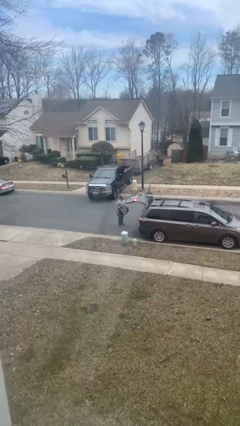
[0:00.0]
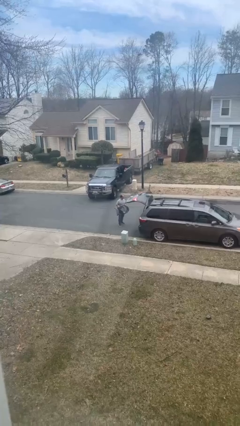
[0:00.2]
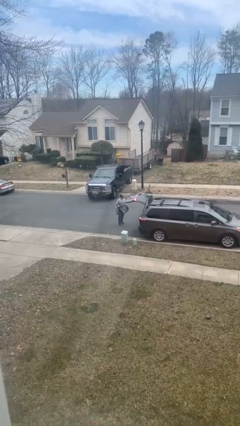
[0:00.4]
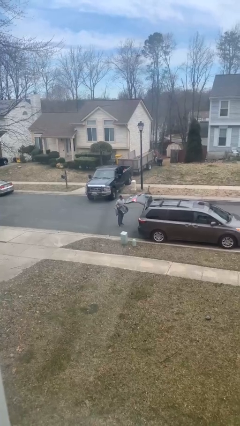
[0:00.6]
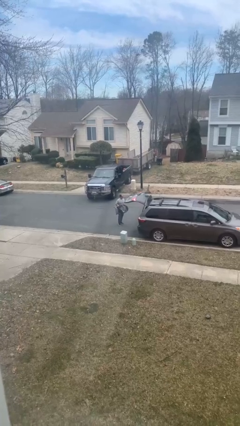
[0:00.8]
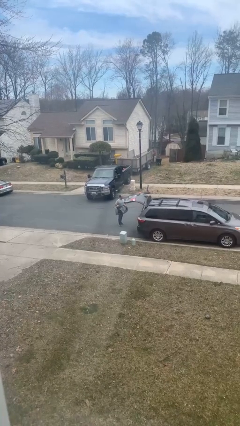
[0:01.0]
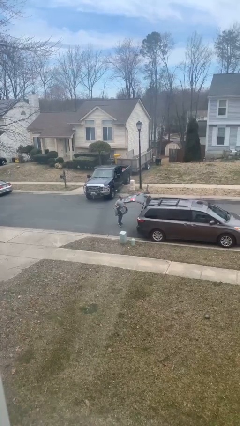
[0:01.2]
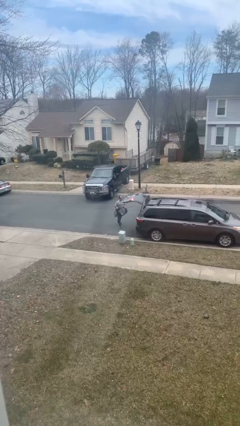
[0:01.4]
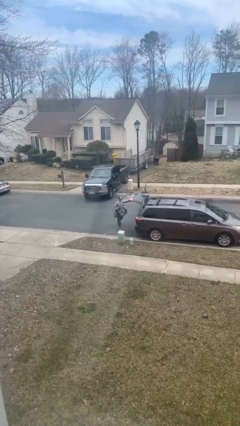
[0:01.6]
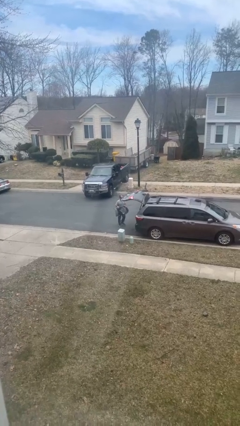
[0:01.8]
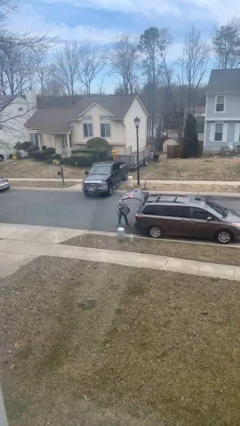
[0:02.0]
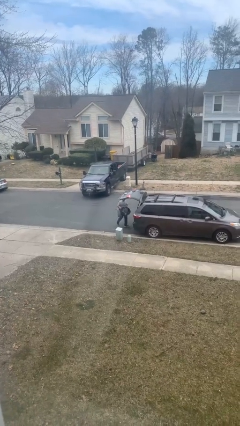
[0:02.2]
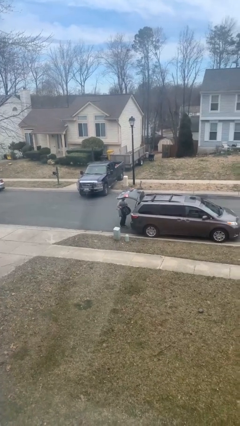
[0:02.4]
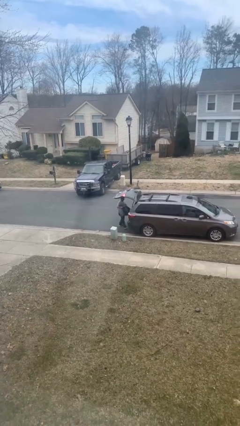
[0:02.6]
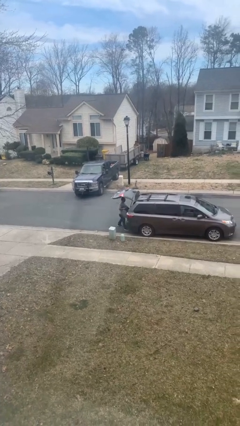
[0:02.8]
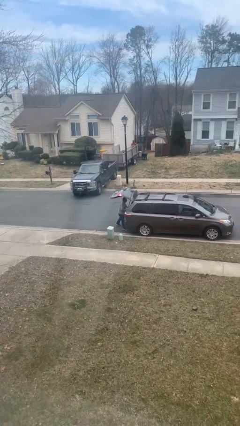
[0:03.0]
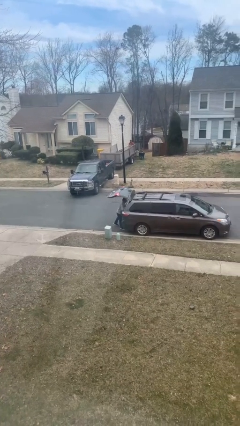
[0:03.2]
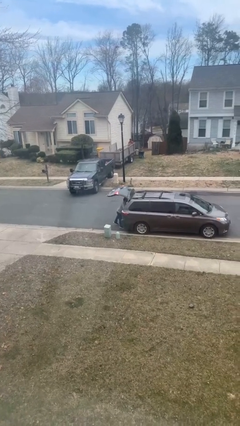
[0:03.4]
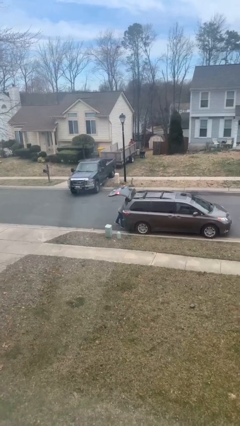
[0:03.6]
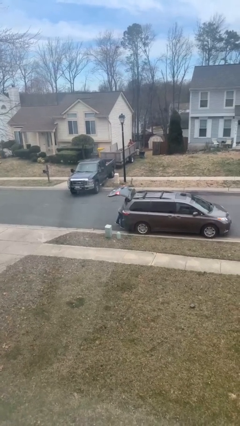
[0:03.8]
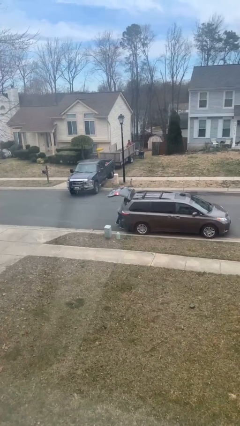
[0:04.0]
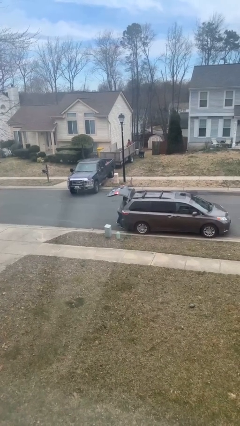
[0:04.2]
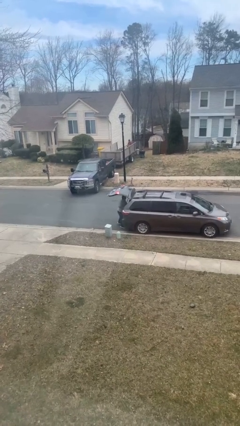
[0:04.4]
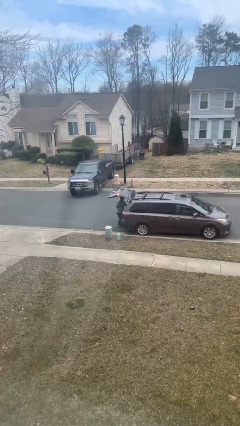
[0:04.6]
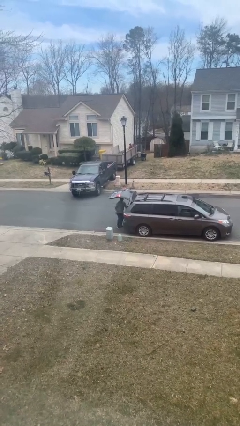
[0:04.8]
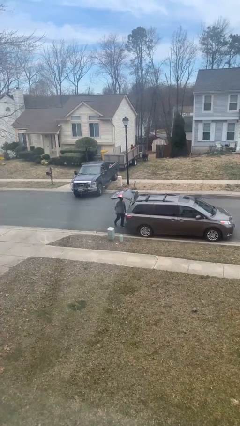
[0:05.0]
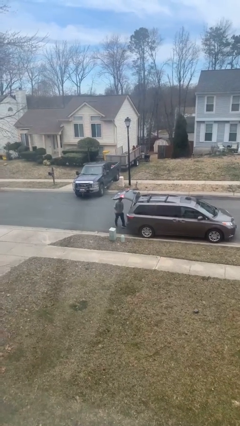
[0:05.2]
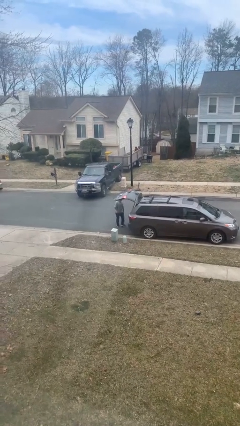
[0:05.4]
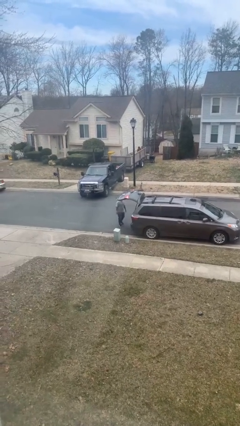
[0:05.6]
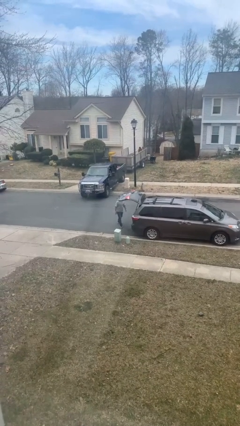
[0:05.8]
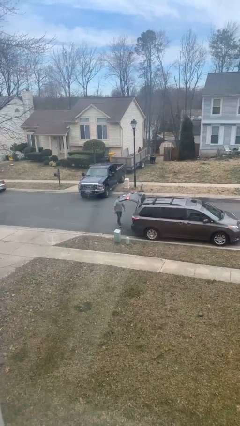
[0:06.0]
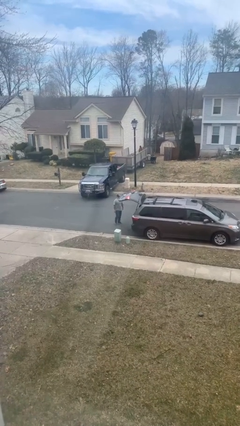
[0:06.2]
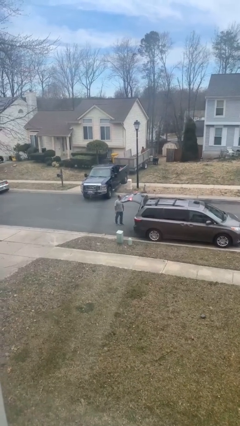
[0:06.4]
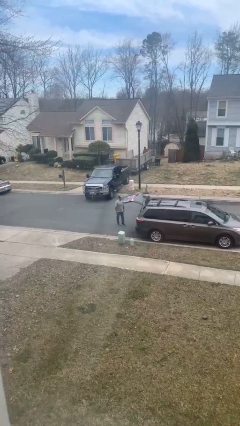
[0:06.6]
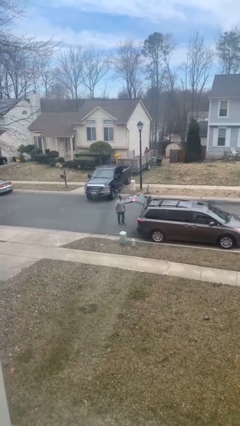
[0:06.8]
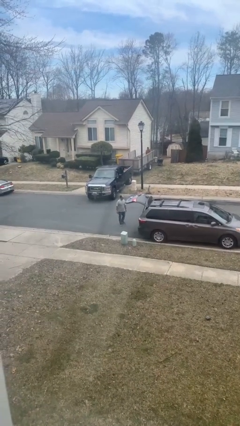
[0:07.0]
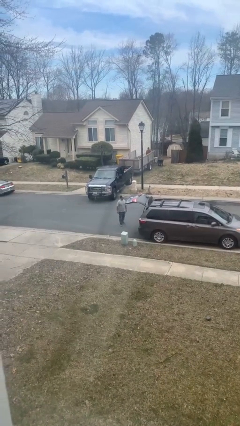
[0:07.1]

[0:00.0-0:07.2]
person loads car

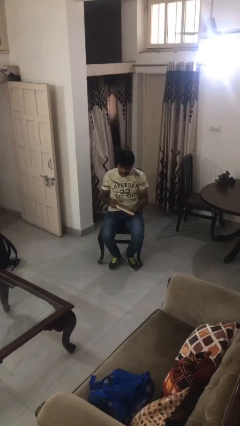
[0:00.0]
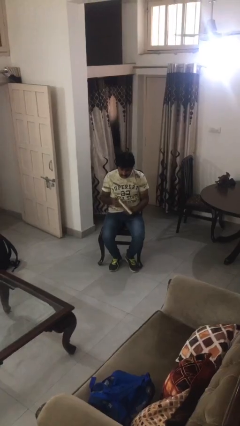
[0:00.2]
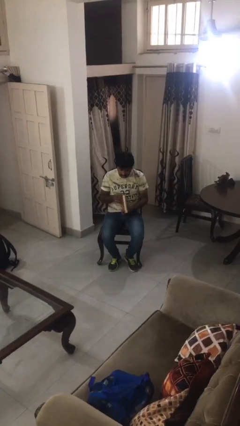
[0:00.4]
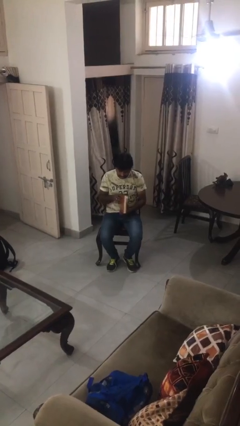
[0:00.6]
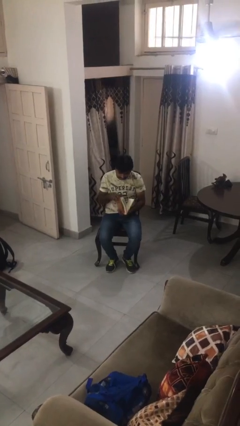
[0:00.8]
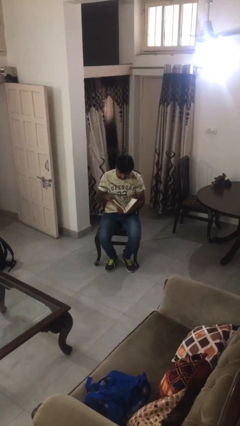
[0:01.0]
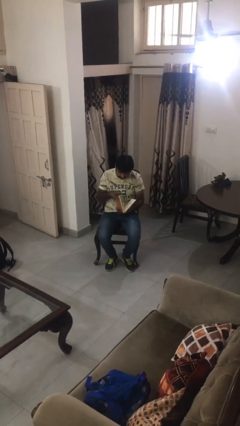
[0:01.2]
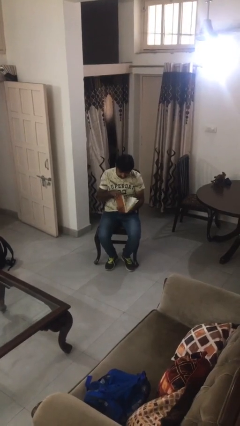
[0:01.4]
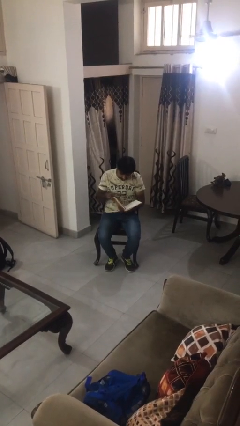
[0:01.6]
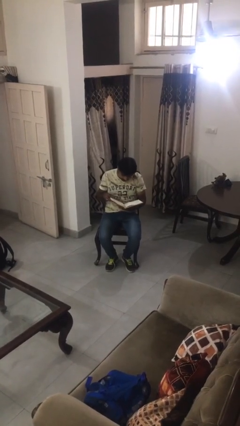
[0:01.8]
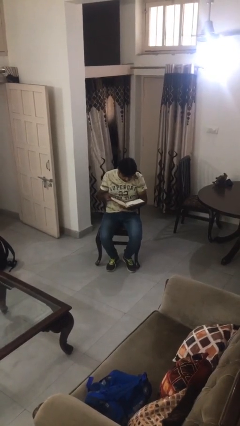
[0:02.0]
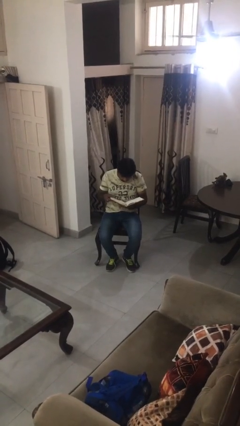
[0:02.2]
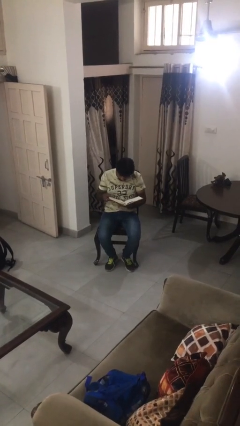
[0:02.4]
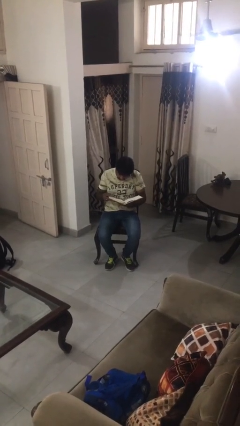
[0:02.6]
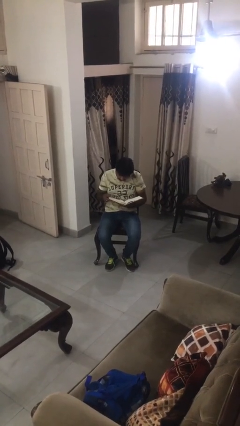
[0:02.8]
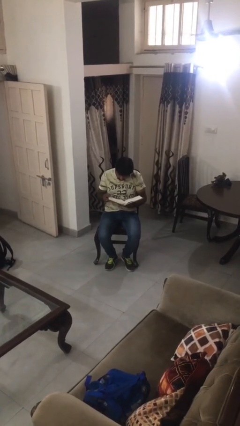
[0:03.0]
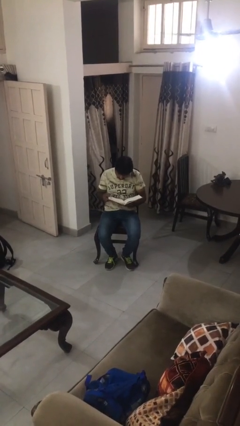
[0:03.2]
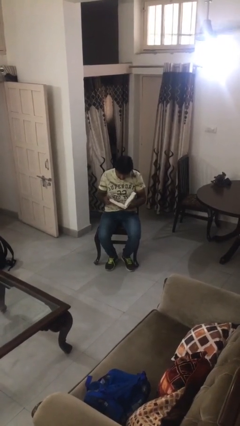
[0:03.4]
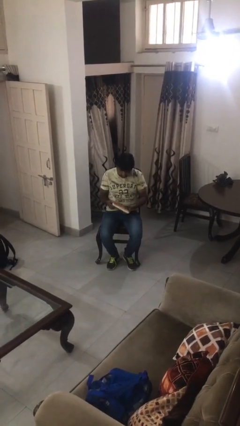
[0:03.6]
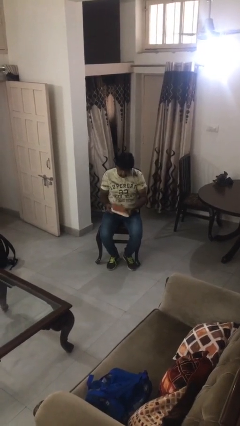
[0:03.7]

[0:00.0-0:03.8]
person reads book

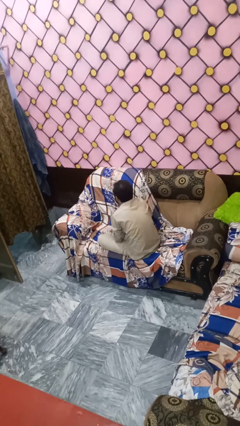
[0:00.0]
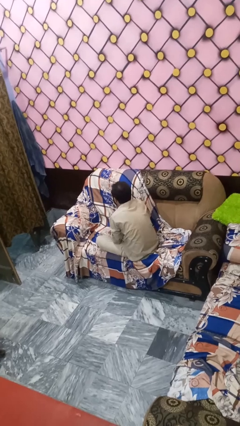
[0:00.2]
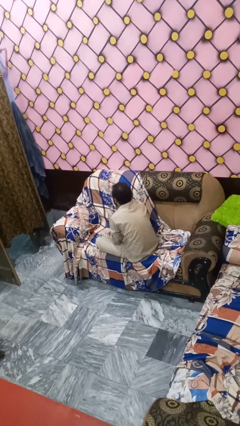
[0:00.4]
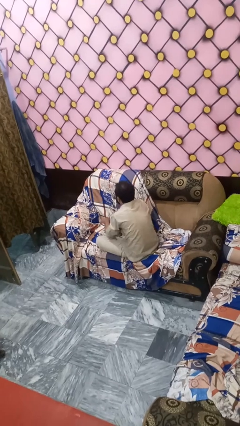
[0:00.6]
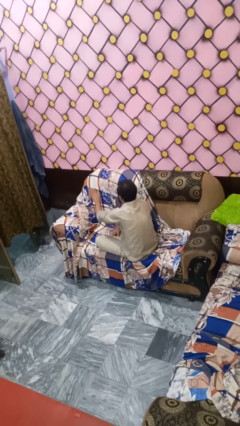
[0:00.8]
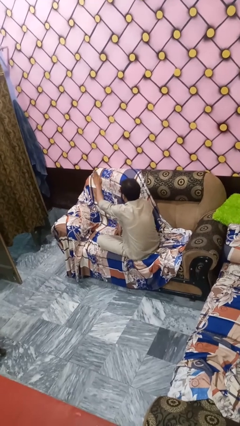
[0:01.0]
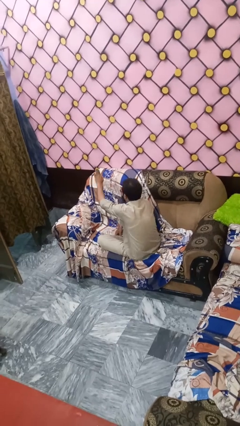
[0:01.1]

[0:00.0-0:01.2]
person gestures stop

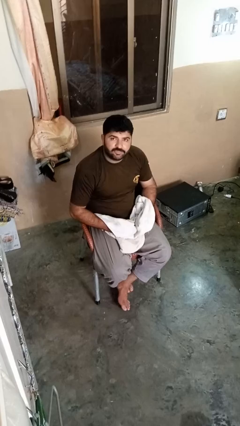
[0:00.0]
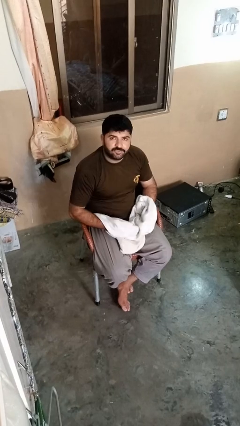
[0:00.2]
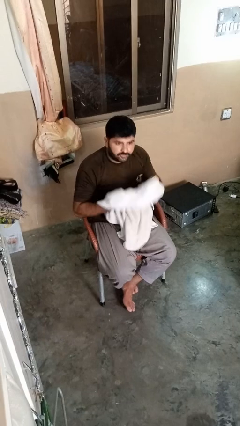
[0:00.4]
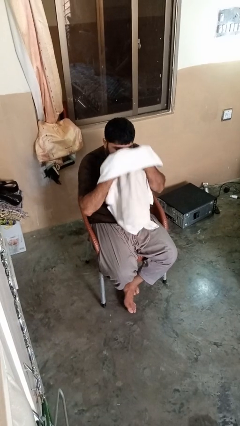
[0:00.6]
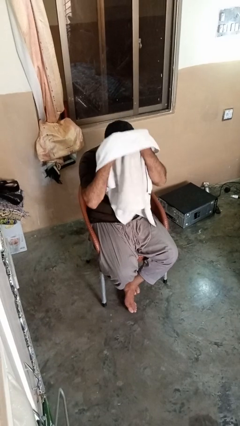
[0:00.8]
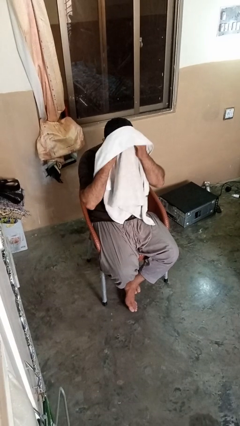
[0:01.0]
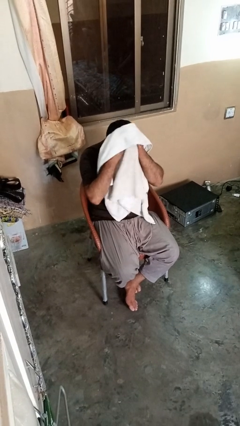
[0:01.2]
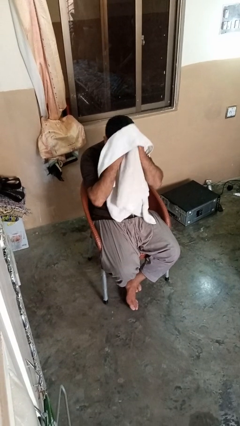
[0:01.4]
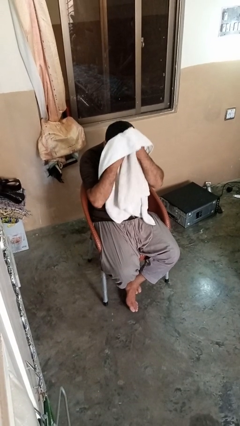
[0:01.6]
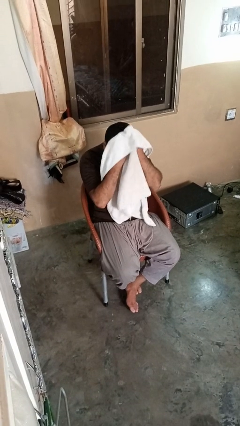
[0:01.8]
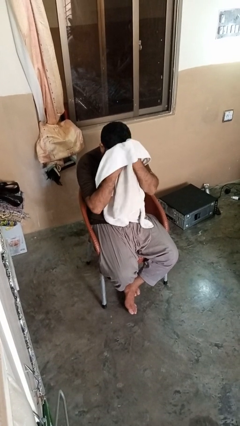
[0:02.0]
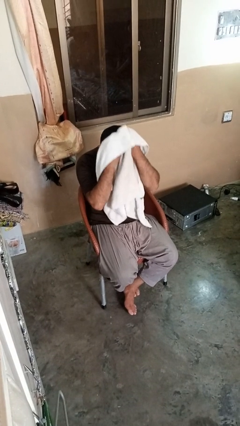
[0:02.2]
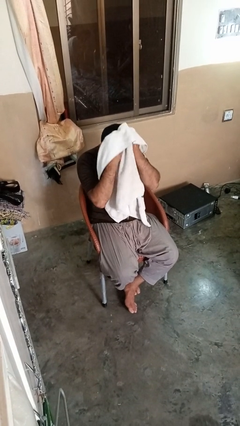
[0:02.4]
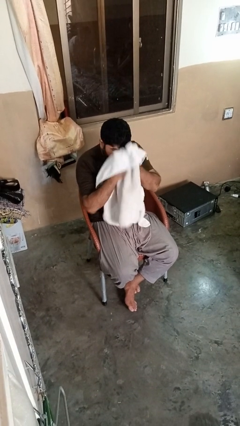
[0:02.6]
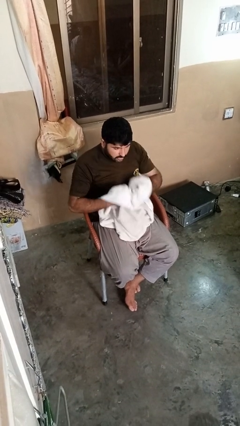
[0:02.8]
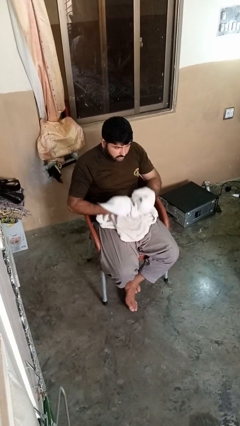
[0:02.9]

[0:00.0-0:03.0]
person dries hair with towel

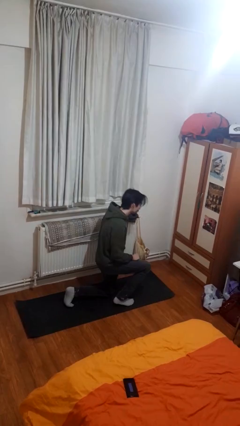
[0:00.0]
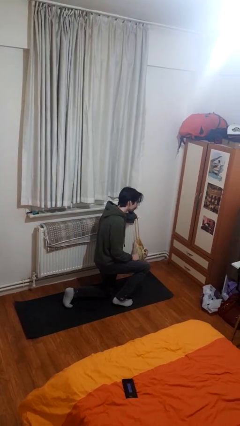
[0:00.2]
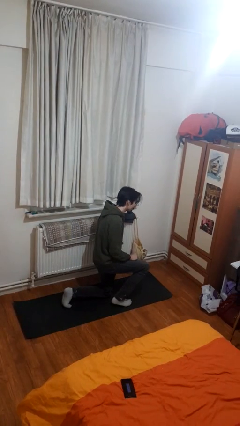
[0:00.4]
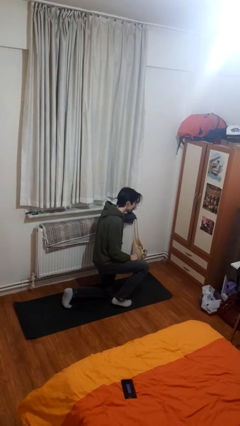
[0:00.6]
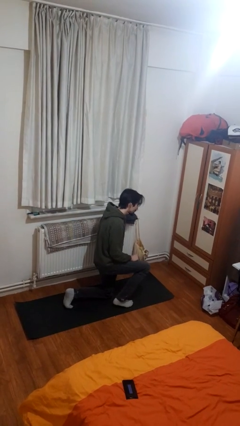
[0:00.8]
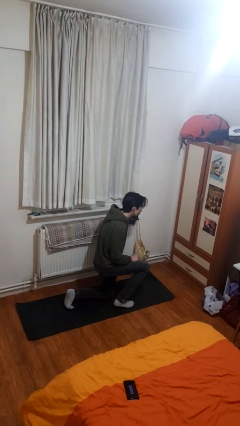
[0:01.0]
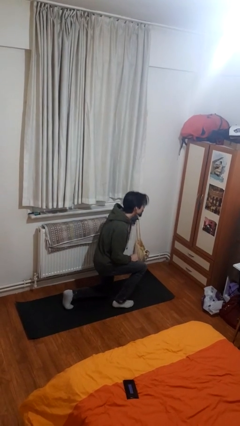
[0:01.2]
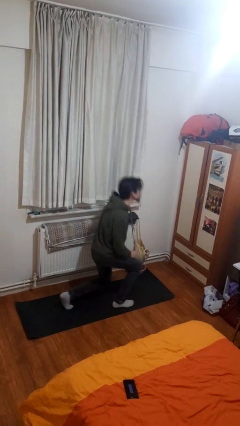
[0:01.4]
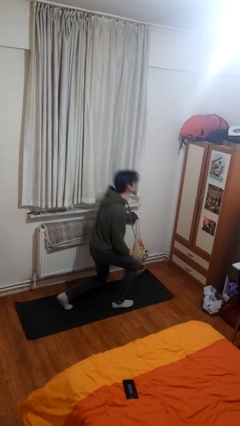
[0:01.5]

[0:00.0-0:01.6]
person kneels

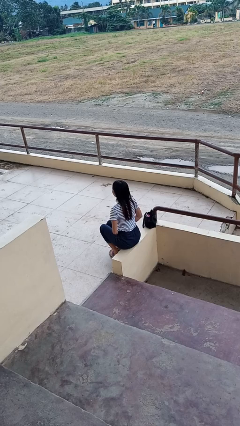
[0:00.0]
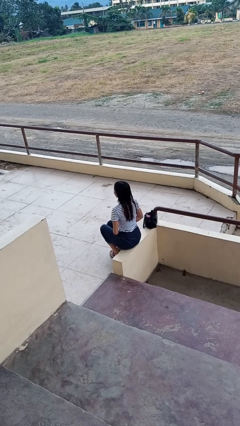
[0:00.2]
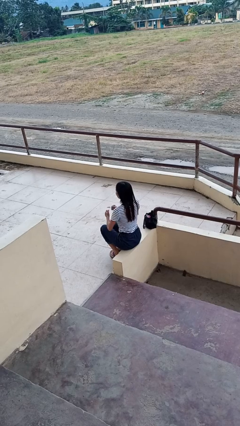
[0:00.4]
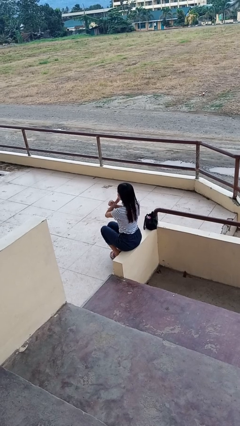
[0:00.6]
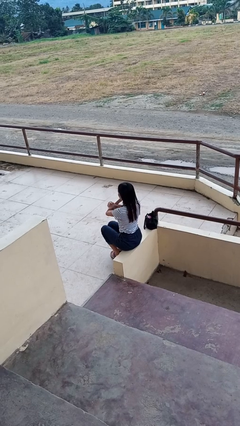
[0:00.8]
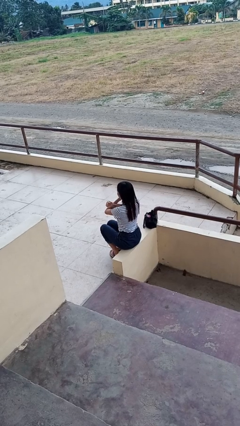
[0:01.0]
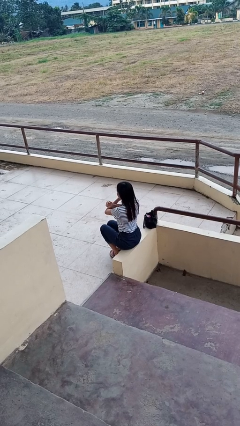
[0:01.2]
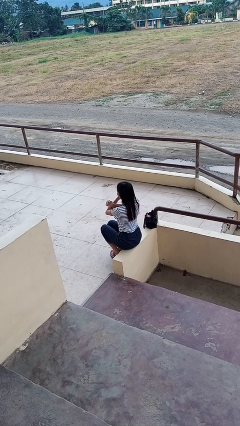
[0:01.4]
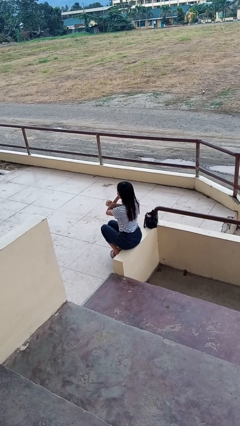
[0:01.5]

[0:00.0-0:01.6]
person gestures arms x
